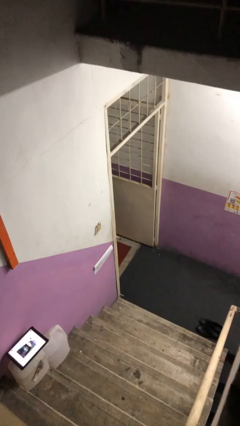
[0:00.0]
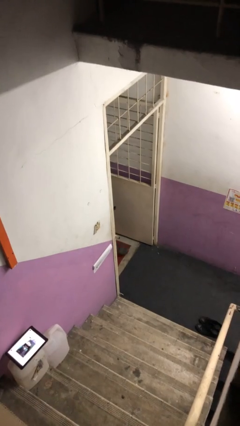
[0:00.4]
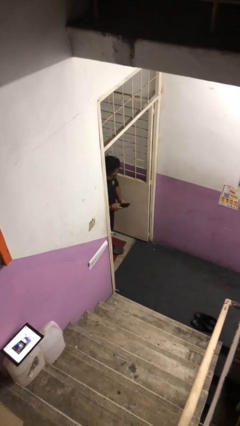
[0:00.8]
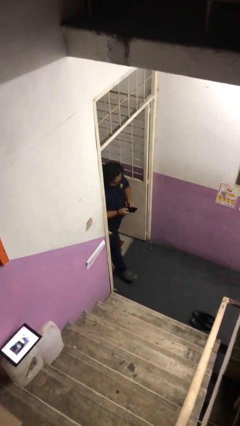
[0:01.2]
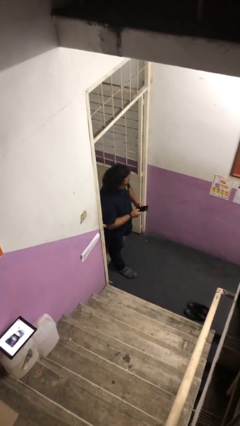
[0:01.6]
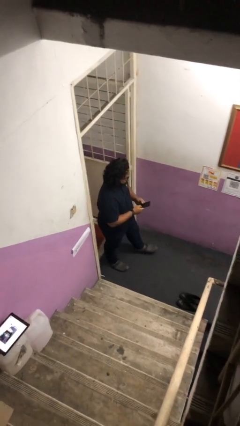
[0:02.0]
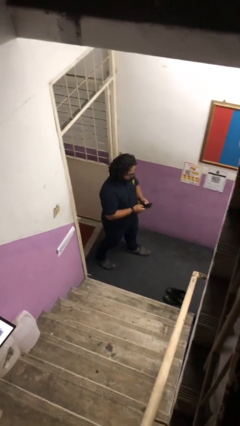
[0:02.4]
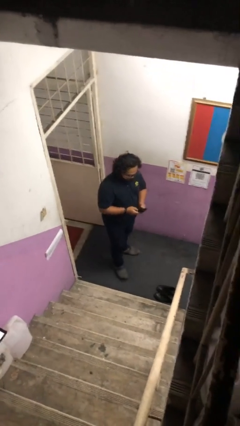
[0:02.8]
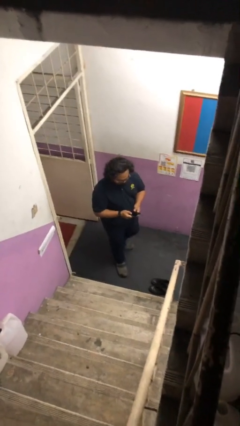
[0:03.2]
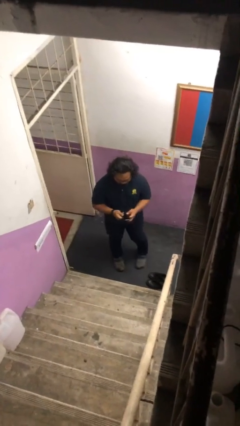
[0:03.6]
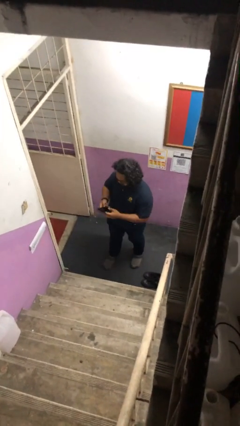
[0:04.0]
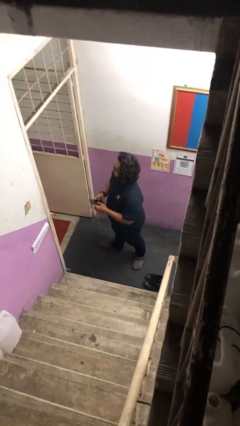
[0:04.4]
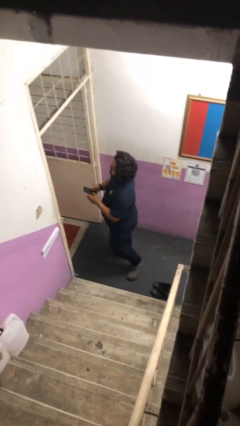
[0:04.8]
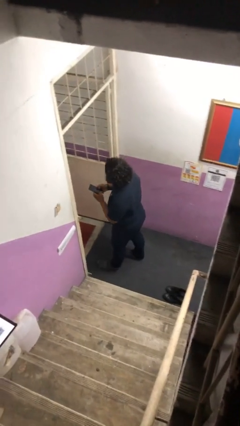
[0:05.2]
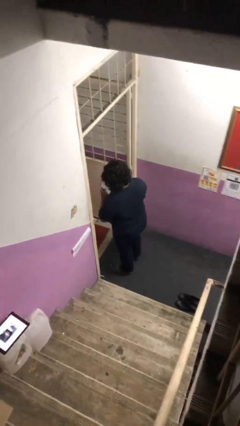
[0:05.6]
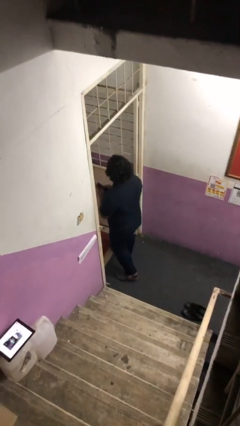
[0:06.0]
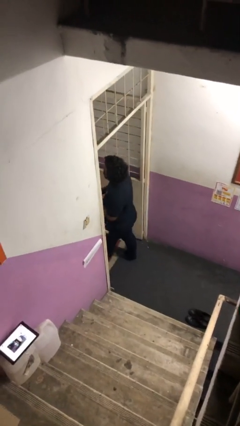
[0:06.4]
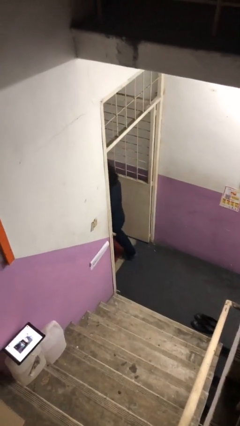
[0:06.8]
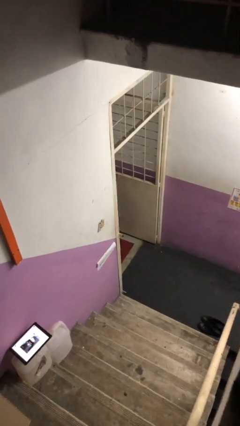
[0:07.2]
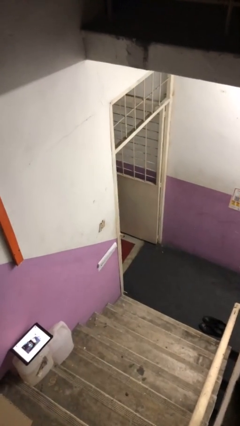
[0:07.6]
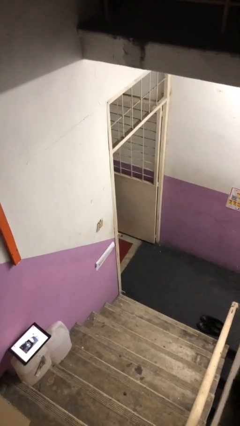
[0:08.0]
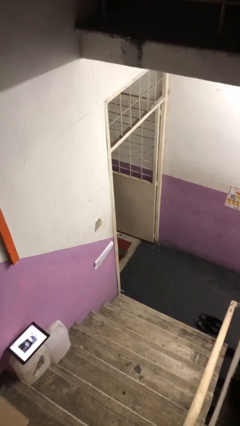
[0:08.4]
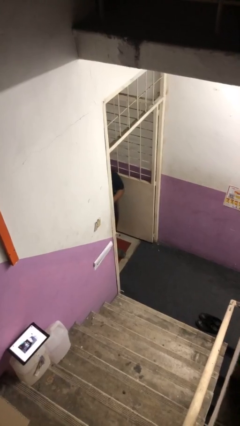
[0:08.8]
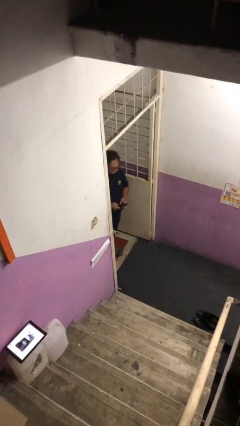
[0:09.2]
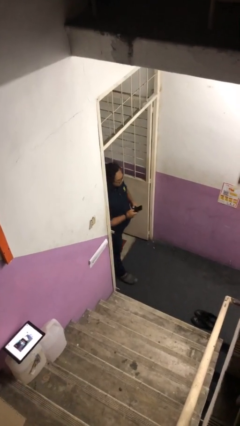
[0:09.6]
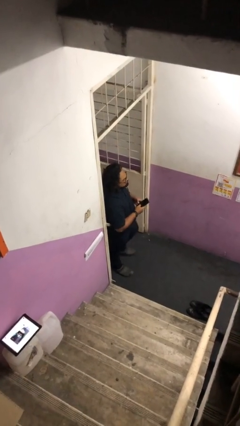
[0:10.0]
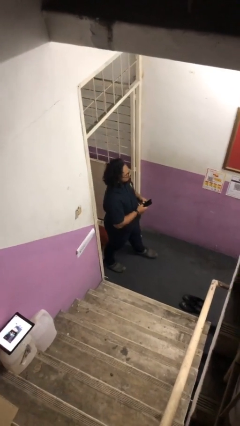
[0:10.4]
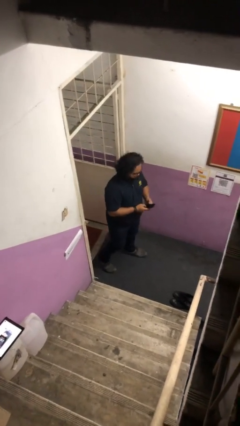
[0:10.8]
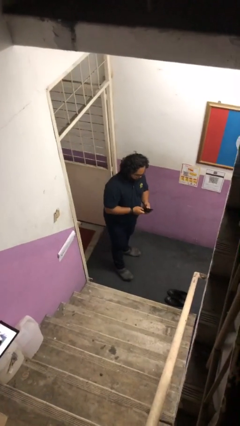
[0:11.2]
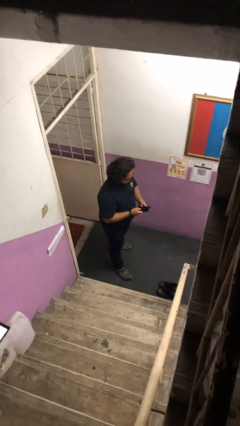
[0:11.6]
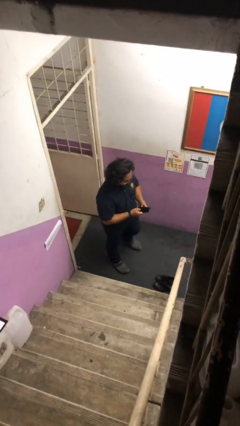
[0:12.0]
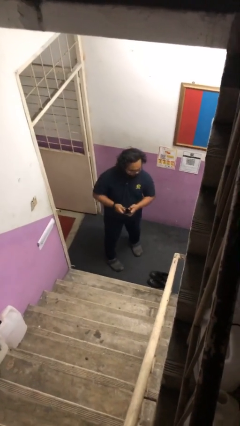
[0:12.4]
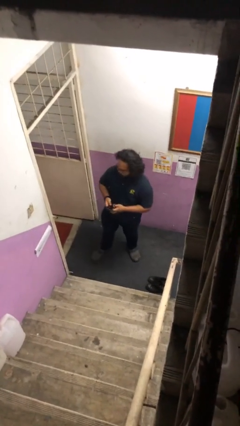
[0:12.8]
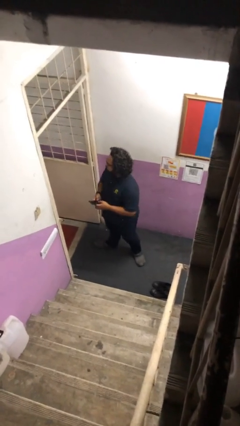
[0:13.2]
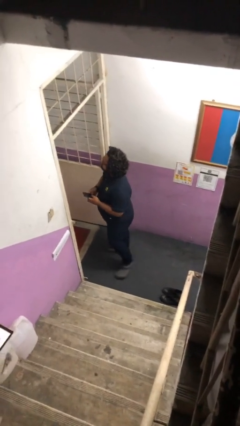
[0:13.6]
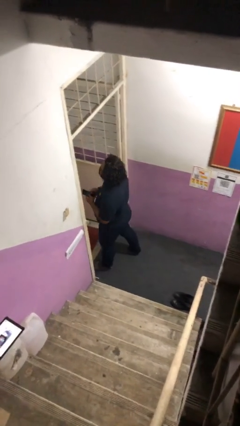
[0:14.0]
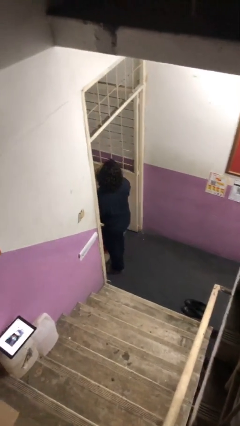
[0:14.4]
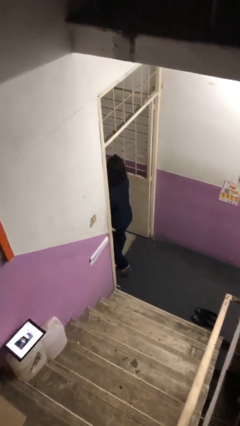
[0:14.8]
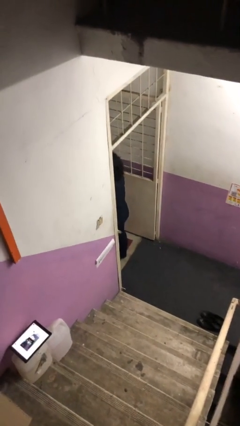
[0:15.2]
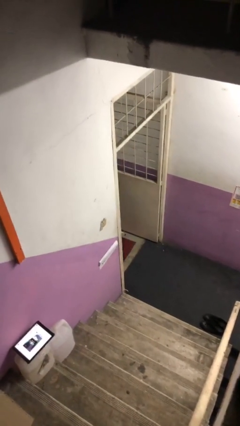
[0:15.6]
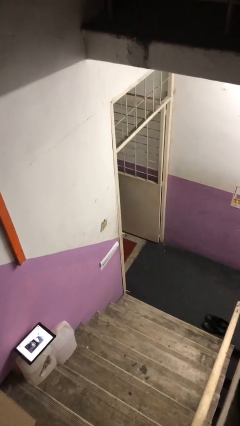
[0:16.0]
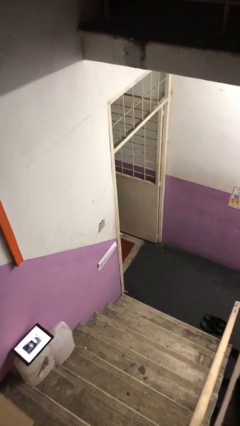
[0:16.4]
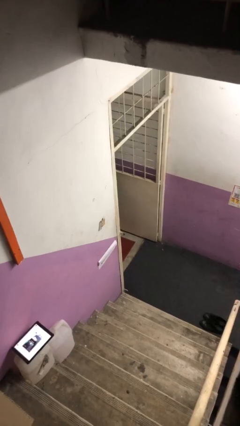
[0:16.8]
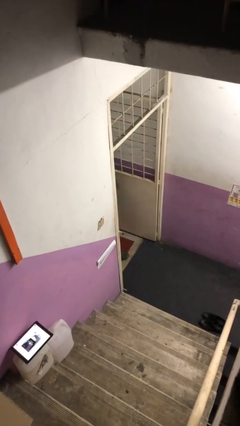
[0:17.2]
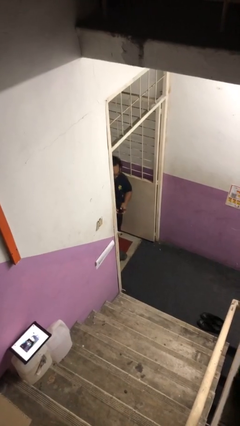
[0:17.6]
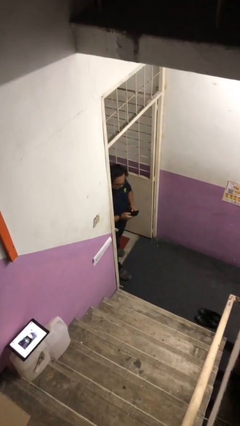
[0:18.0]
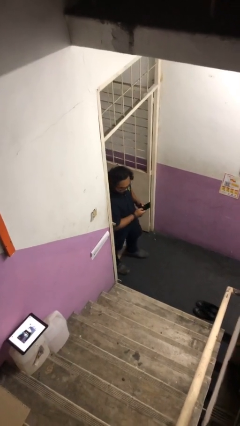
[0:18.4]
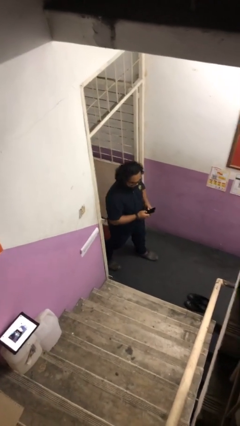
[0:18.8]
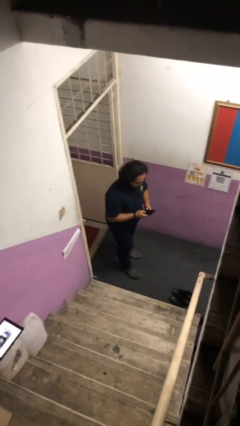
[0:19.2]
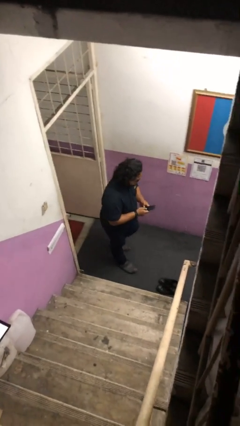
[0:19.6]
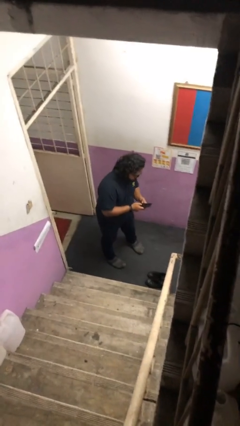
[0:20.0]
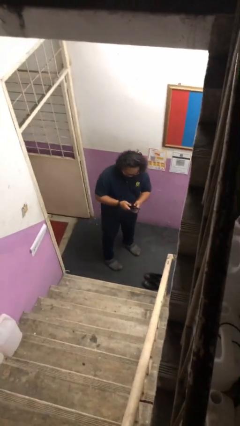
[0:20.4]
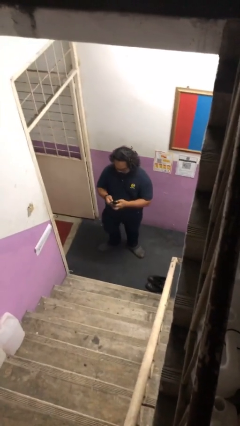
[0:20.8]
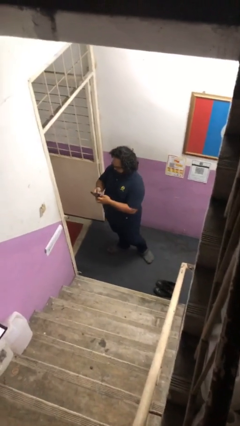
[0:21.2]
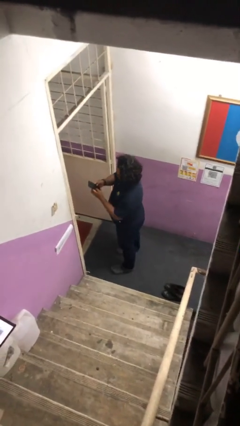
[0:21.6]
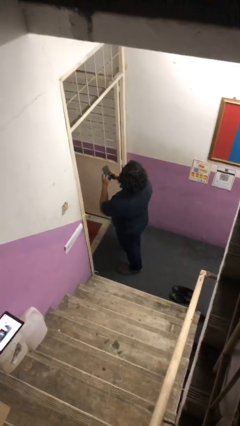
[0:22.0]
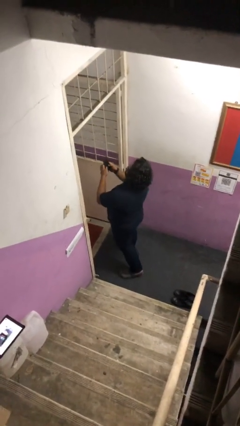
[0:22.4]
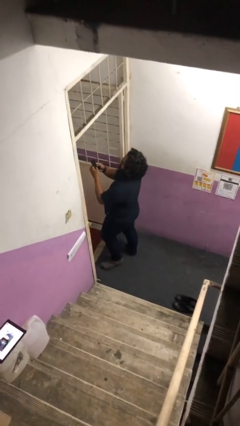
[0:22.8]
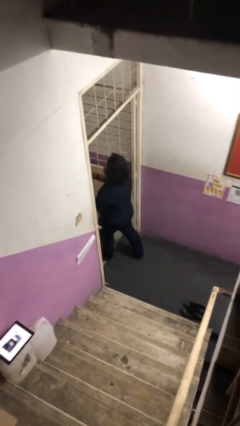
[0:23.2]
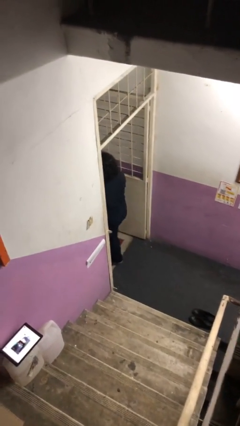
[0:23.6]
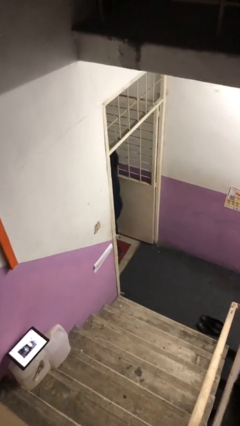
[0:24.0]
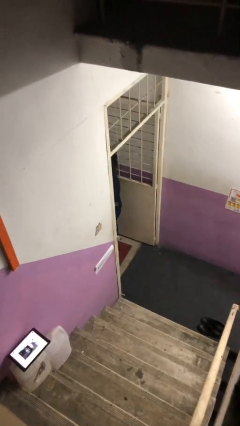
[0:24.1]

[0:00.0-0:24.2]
person texts on phone

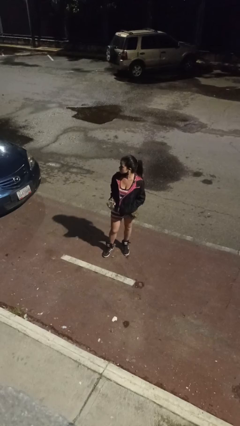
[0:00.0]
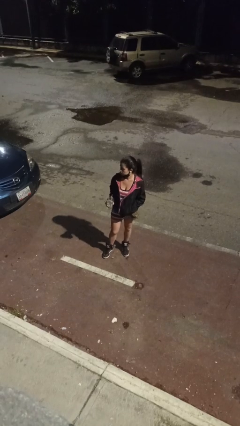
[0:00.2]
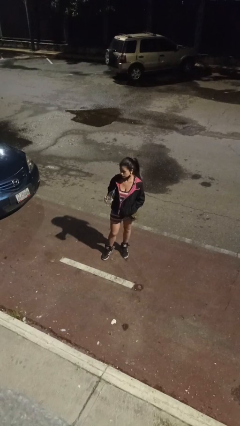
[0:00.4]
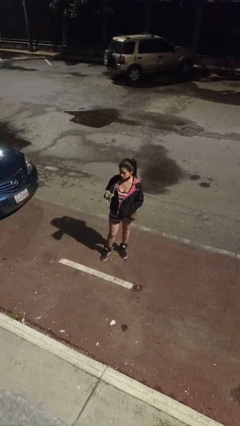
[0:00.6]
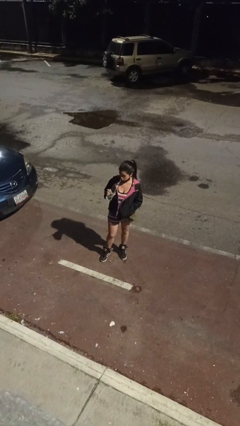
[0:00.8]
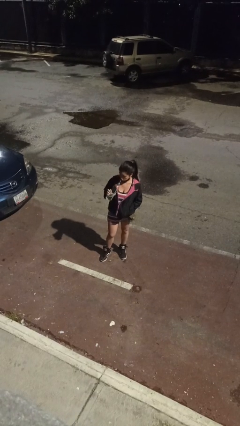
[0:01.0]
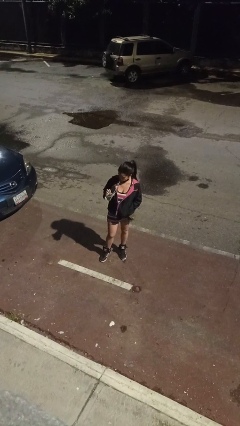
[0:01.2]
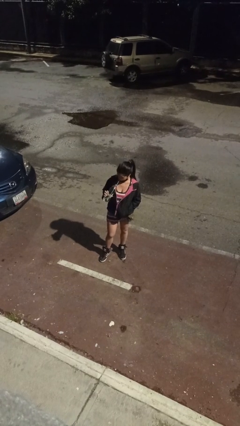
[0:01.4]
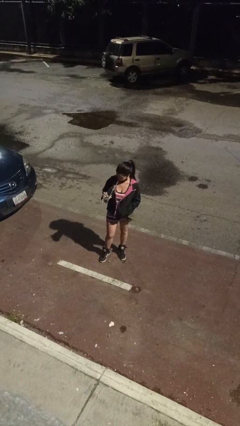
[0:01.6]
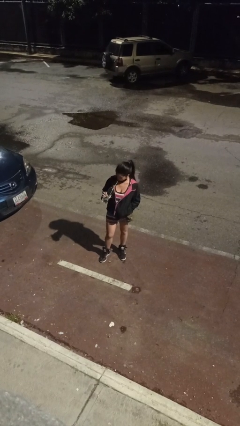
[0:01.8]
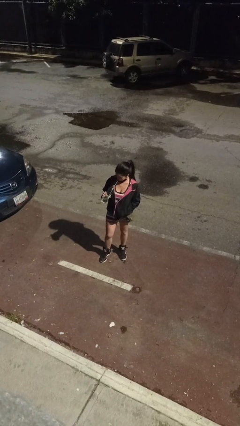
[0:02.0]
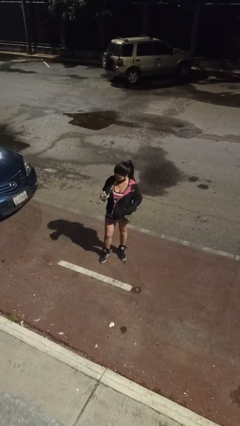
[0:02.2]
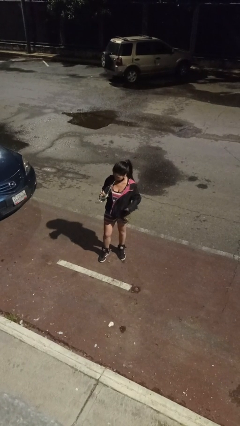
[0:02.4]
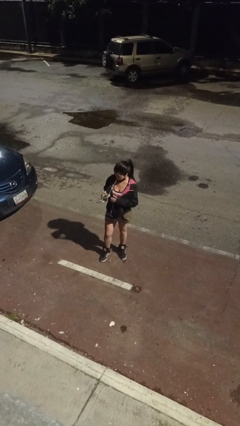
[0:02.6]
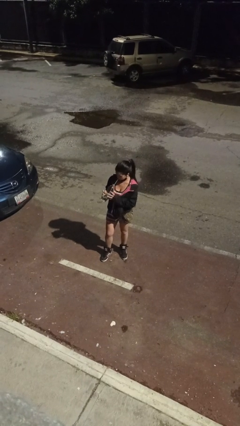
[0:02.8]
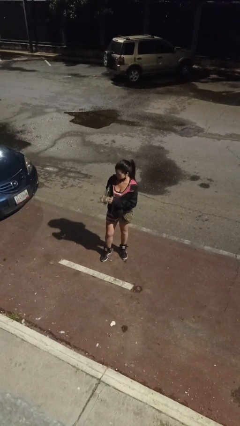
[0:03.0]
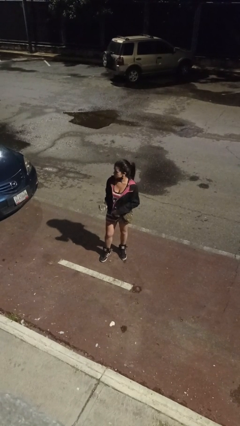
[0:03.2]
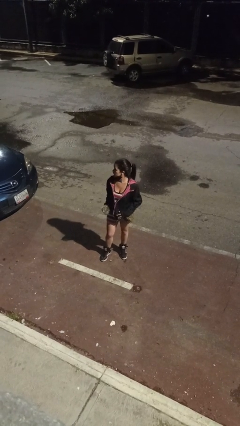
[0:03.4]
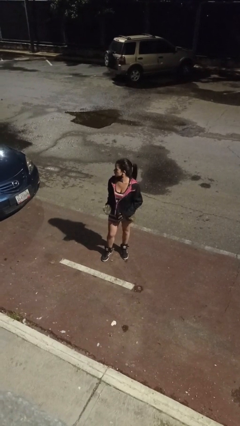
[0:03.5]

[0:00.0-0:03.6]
person drinks from straw

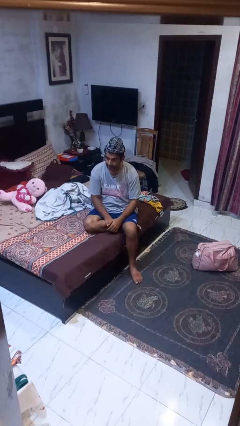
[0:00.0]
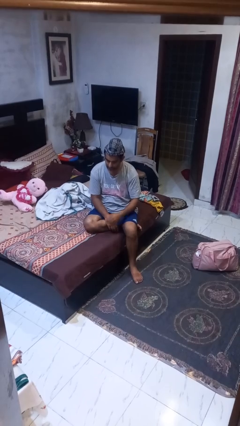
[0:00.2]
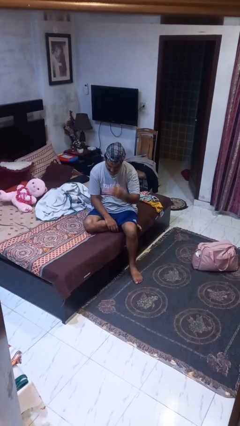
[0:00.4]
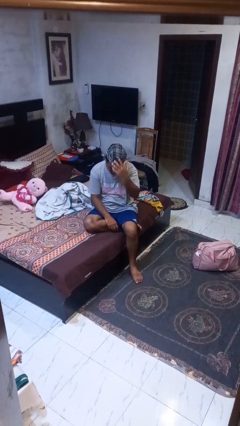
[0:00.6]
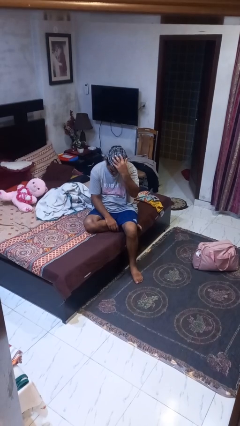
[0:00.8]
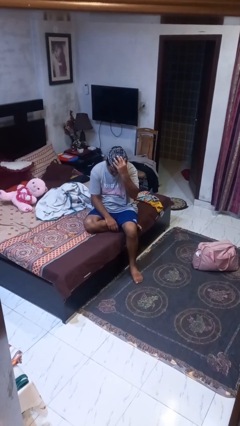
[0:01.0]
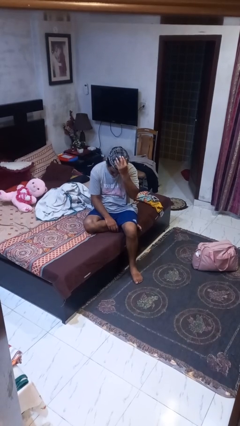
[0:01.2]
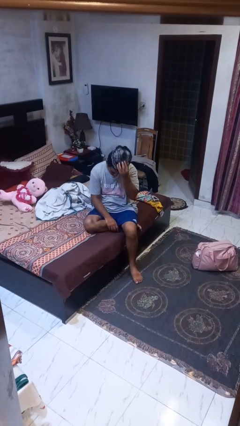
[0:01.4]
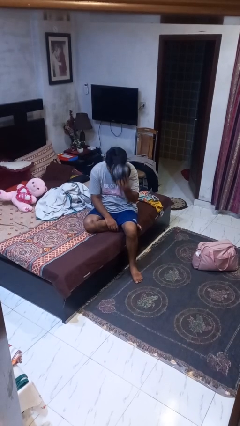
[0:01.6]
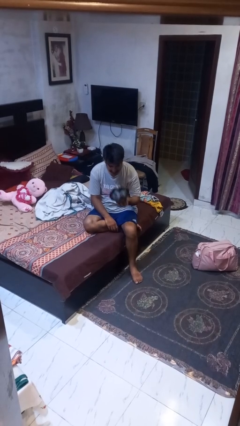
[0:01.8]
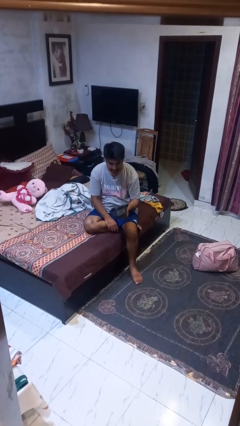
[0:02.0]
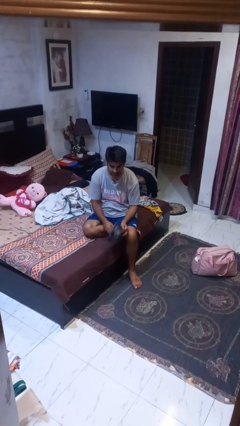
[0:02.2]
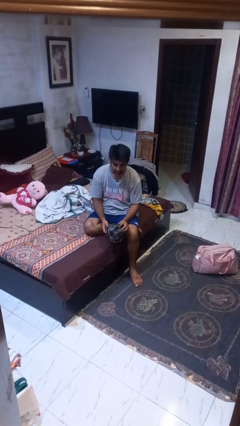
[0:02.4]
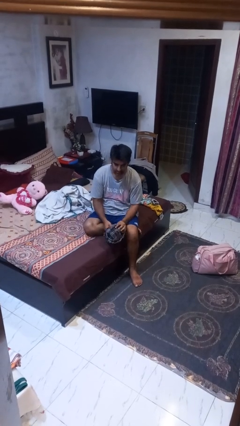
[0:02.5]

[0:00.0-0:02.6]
person takes off hat
